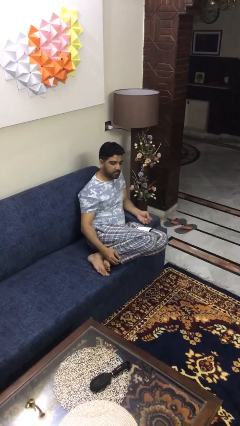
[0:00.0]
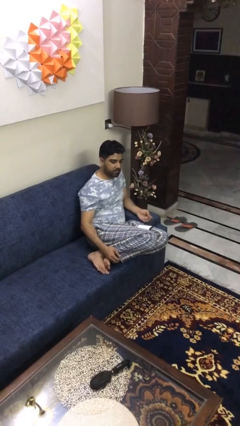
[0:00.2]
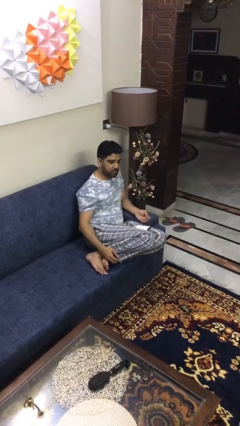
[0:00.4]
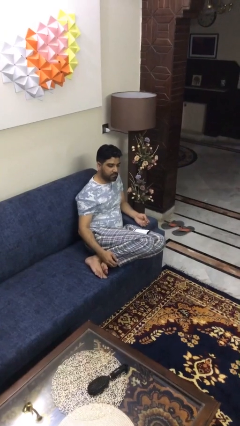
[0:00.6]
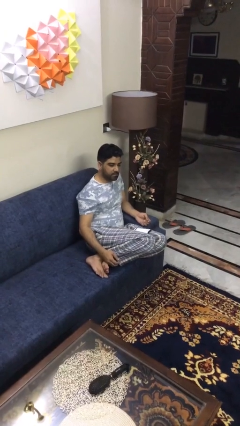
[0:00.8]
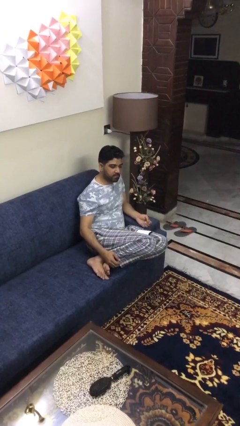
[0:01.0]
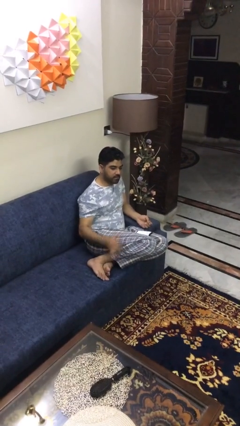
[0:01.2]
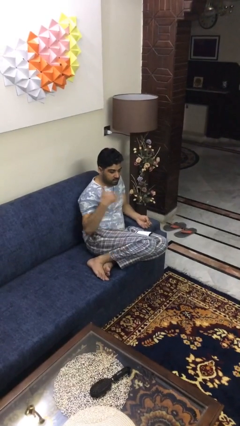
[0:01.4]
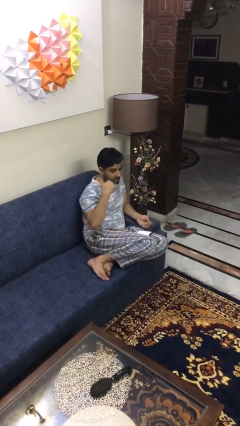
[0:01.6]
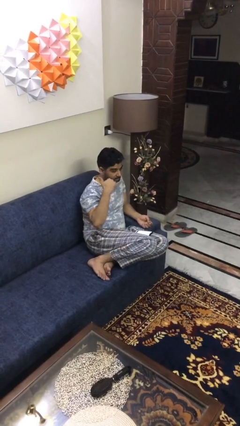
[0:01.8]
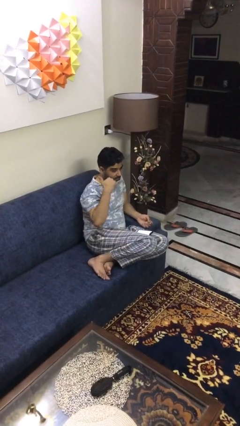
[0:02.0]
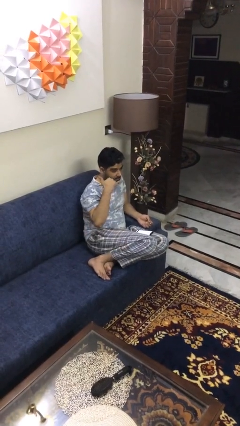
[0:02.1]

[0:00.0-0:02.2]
person gestures call me

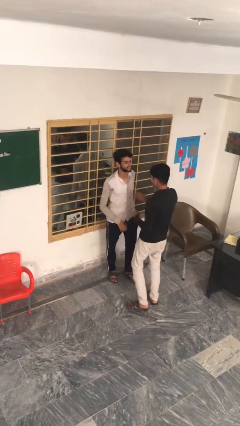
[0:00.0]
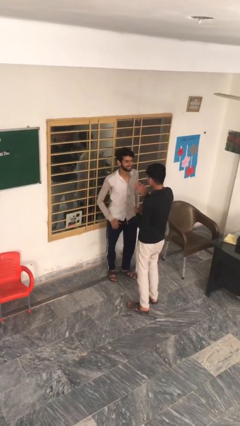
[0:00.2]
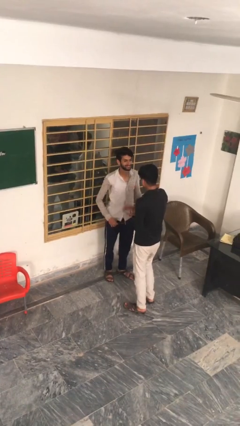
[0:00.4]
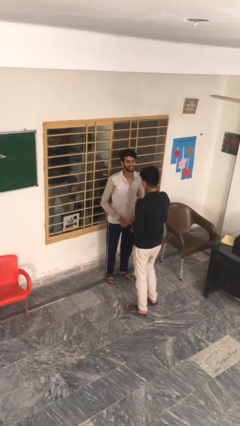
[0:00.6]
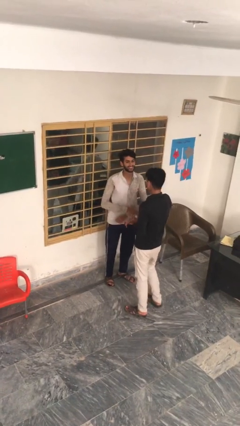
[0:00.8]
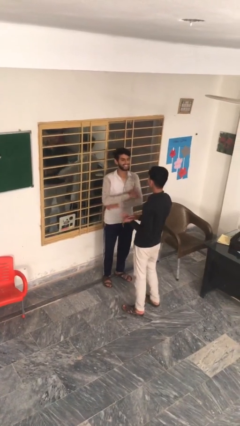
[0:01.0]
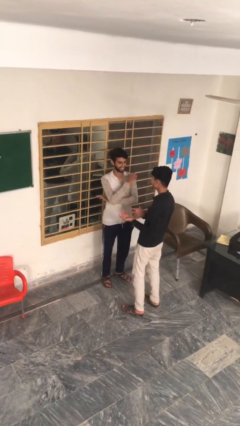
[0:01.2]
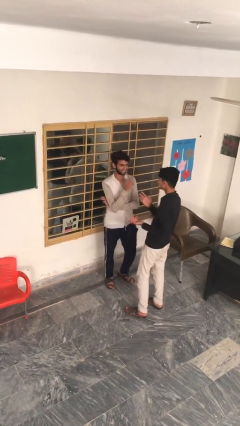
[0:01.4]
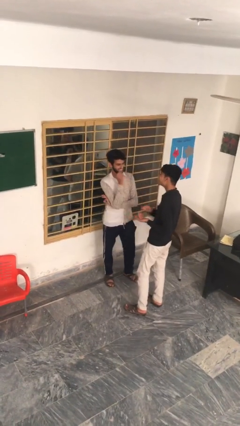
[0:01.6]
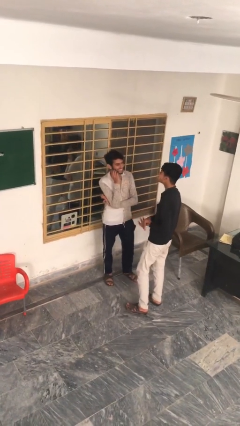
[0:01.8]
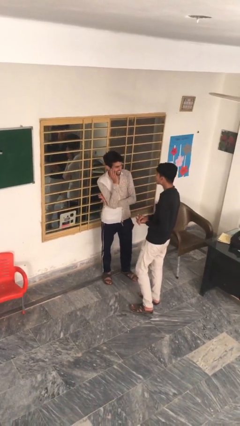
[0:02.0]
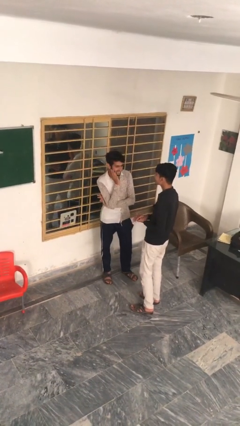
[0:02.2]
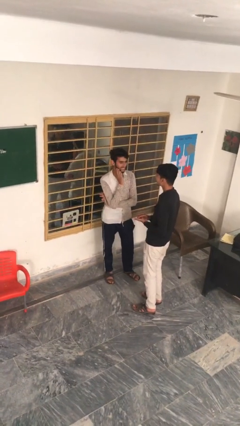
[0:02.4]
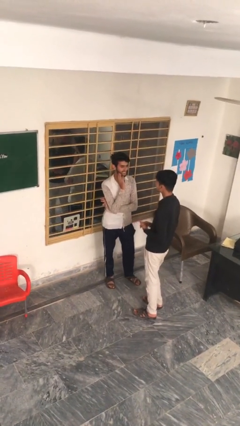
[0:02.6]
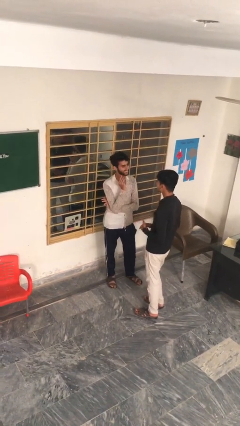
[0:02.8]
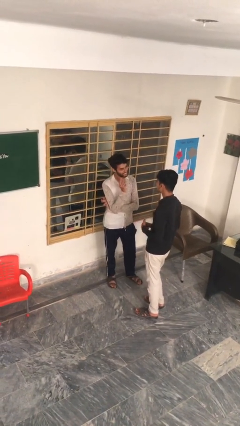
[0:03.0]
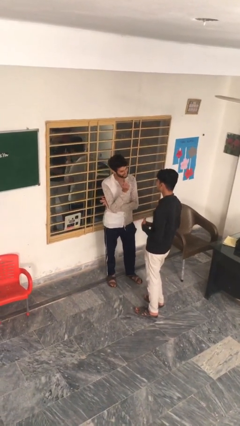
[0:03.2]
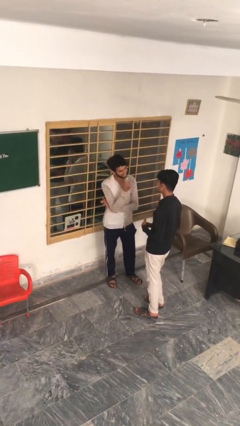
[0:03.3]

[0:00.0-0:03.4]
person talks to person

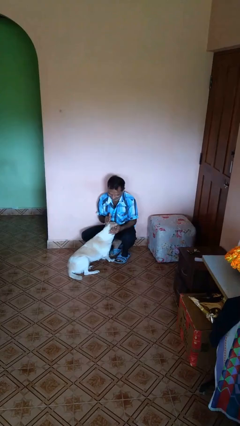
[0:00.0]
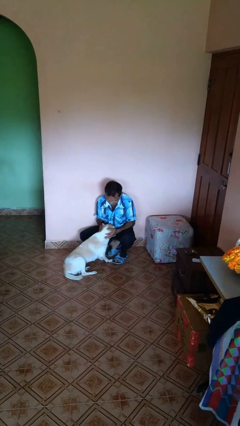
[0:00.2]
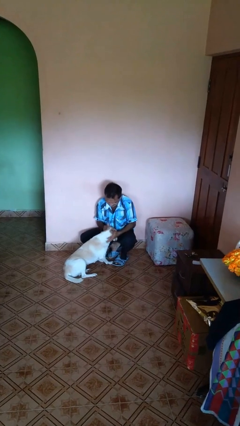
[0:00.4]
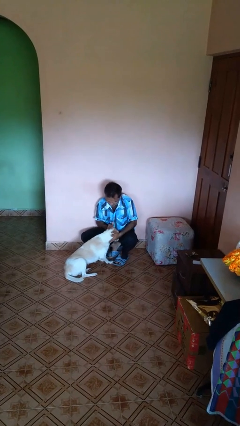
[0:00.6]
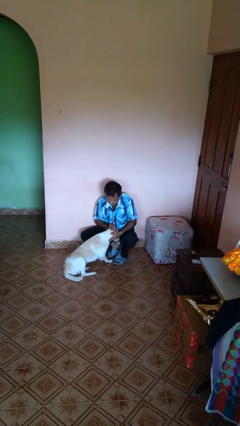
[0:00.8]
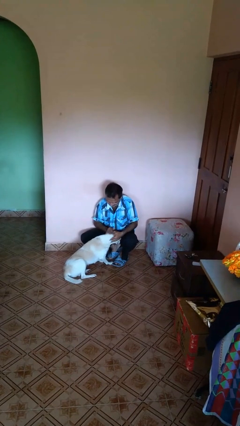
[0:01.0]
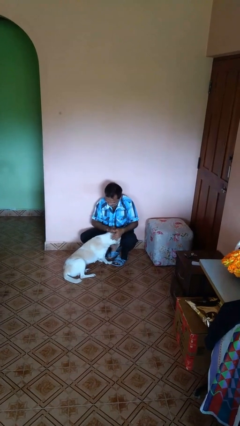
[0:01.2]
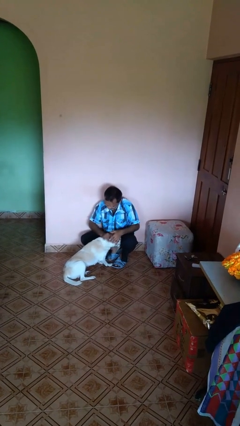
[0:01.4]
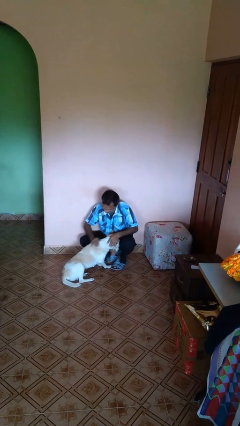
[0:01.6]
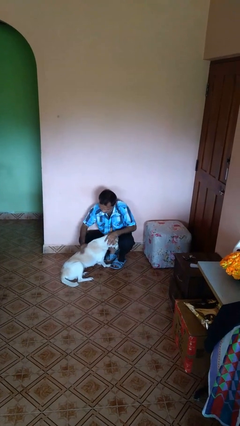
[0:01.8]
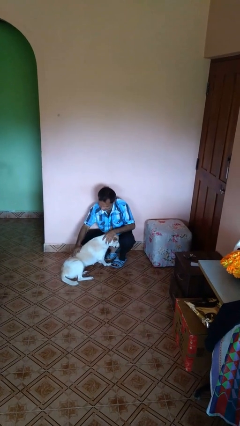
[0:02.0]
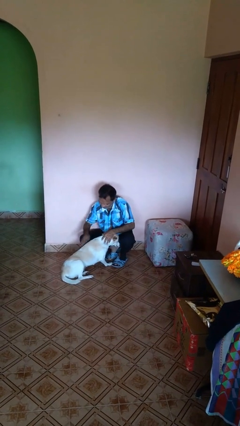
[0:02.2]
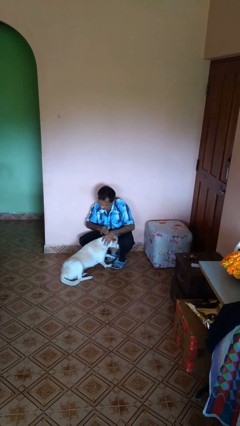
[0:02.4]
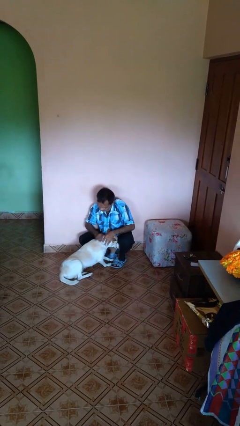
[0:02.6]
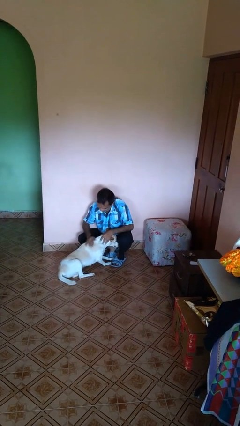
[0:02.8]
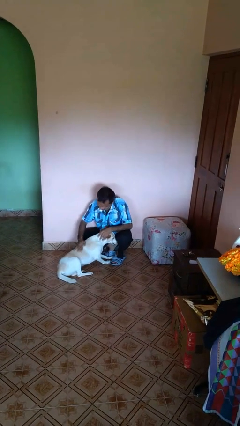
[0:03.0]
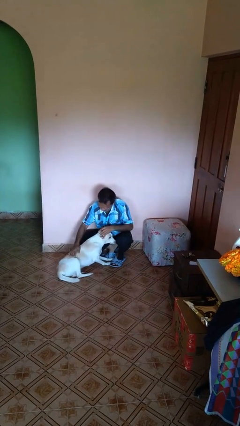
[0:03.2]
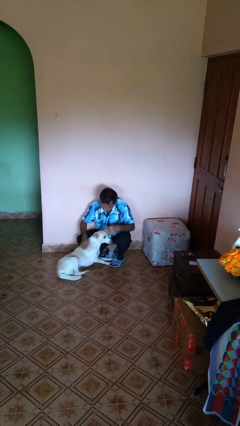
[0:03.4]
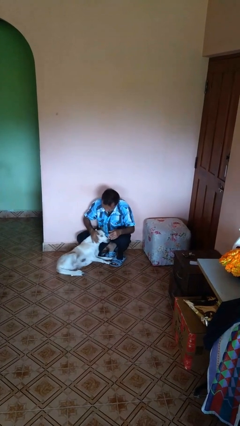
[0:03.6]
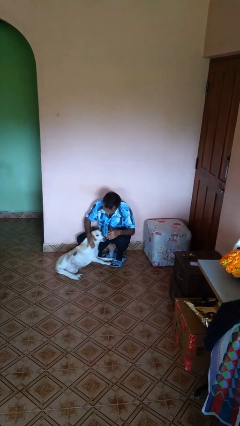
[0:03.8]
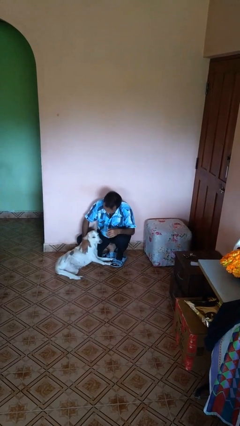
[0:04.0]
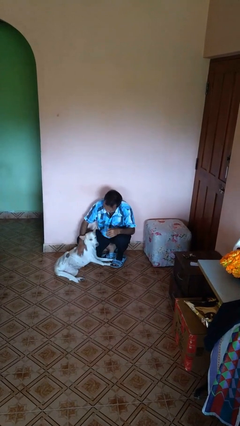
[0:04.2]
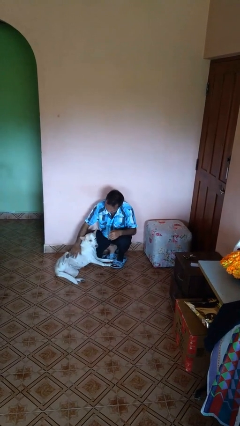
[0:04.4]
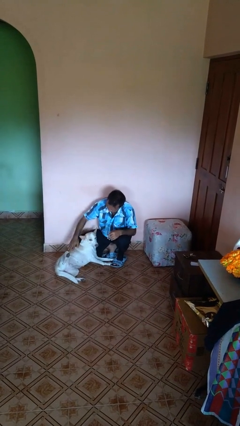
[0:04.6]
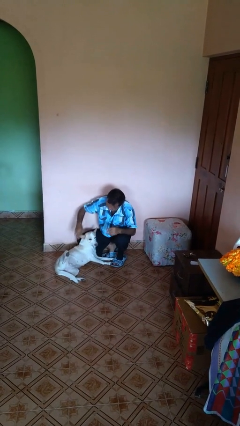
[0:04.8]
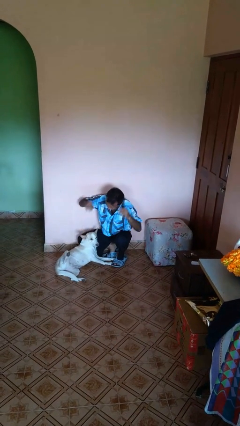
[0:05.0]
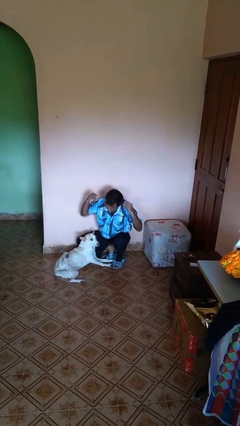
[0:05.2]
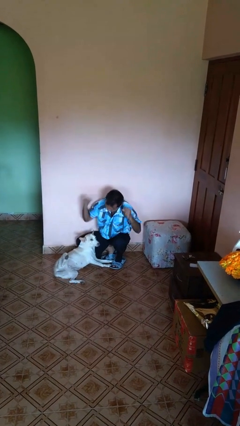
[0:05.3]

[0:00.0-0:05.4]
person pets dog

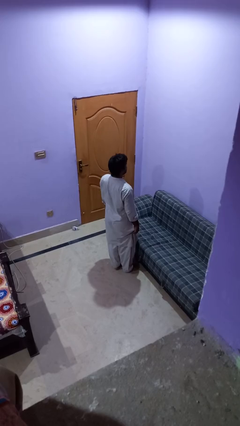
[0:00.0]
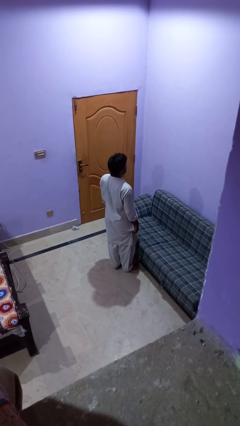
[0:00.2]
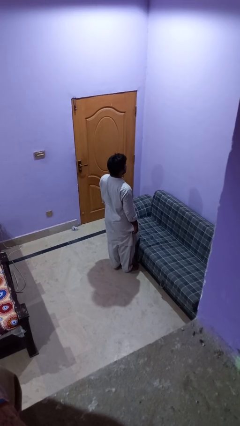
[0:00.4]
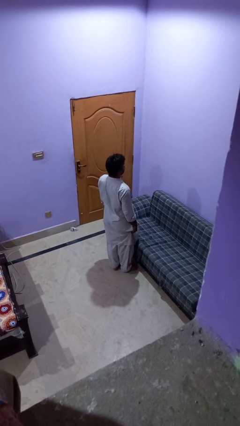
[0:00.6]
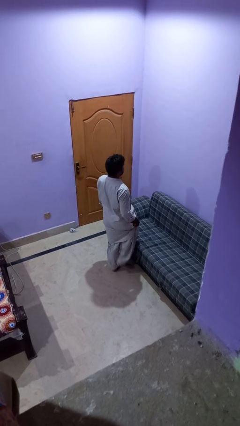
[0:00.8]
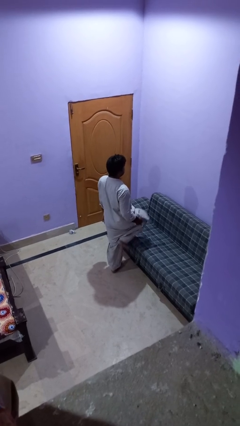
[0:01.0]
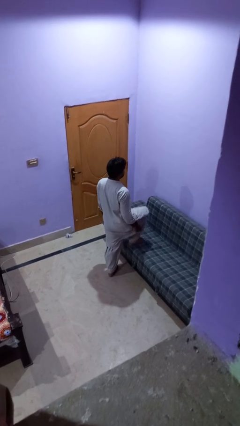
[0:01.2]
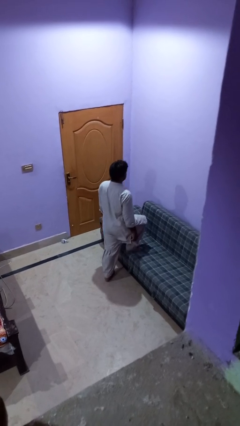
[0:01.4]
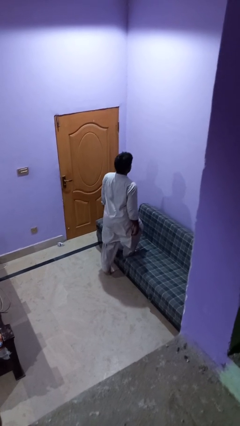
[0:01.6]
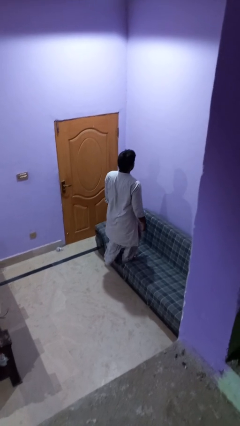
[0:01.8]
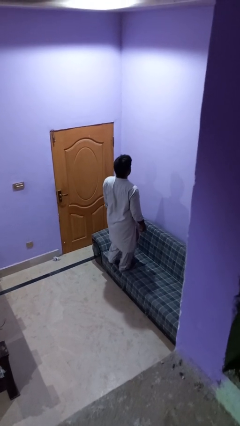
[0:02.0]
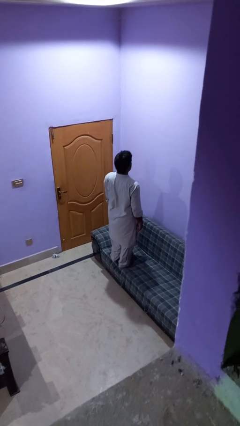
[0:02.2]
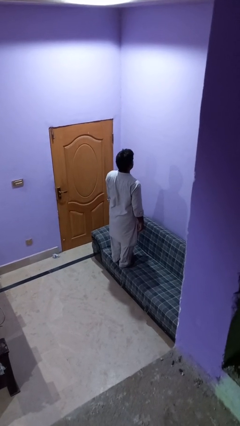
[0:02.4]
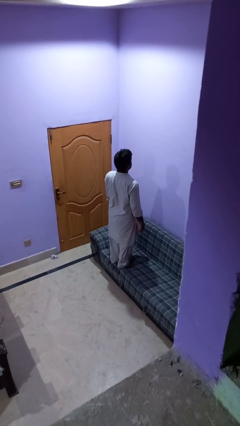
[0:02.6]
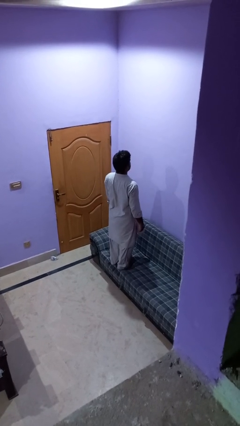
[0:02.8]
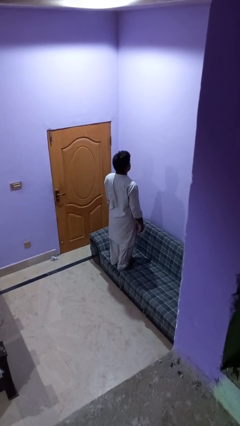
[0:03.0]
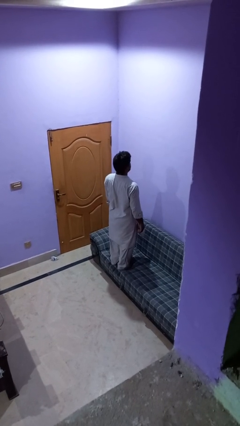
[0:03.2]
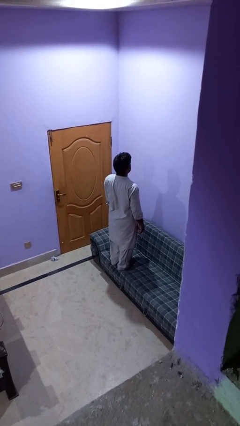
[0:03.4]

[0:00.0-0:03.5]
person climbs on couch

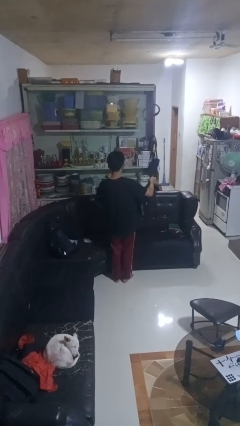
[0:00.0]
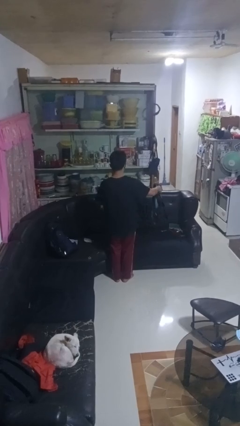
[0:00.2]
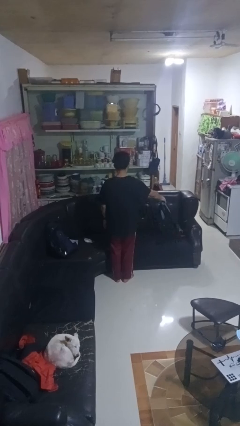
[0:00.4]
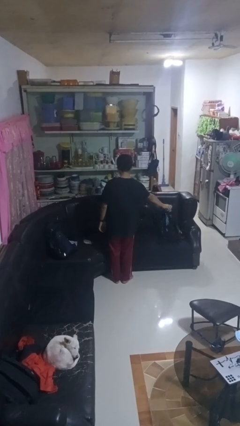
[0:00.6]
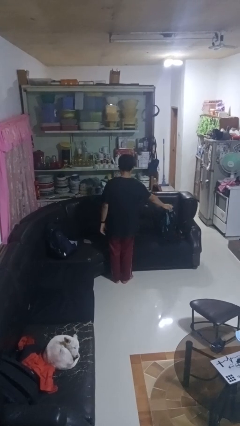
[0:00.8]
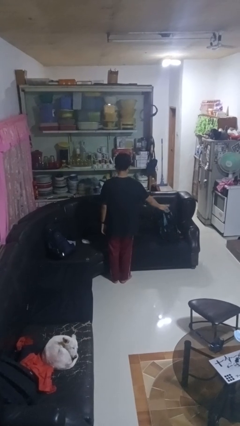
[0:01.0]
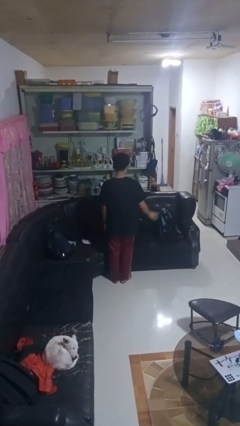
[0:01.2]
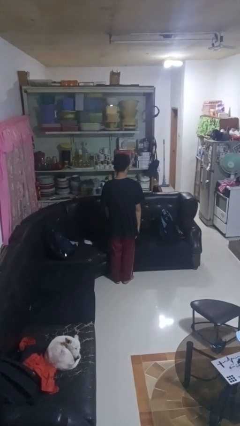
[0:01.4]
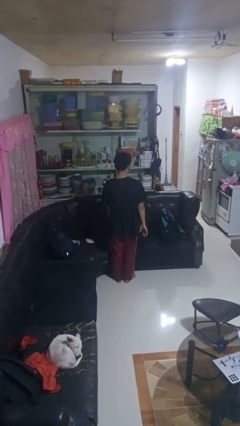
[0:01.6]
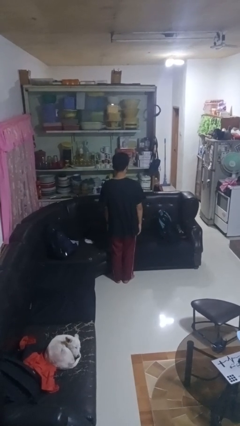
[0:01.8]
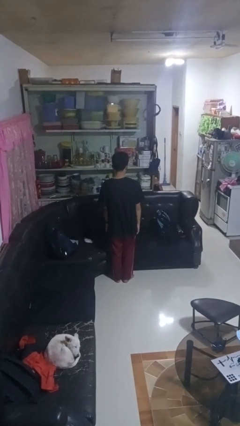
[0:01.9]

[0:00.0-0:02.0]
person puts down object on couch

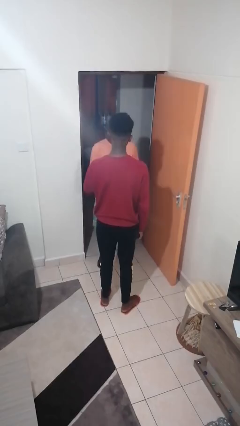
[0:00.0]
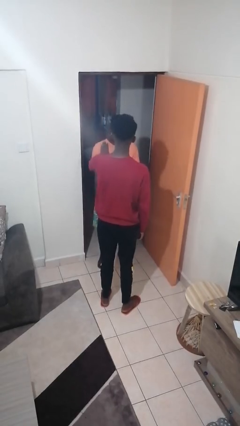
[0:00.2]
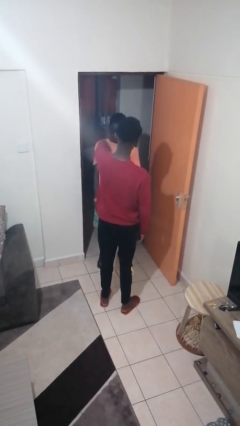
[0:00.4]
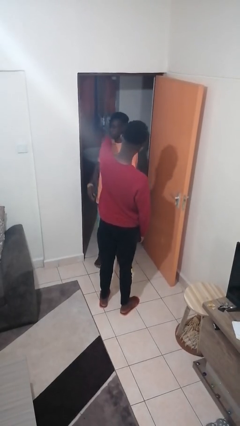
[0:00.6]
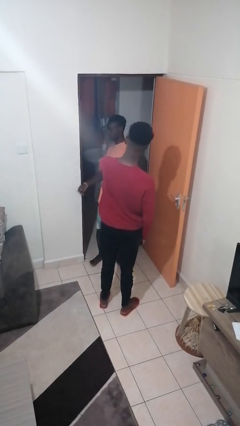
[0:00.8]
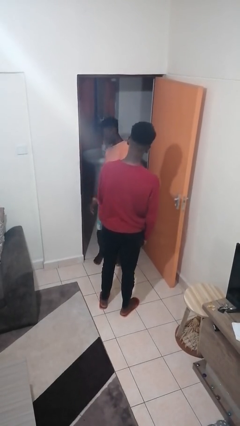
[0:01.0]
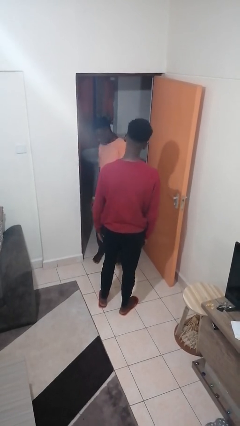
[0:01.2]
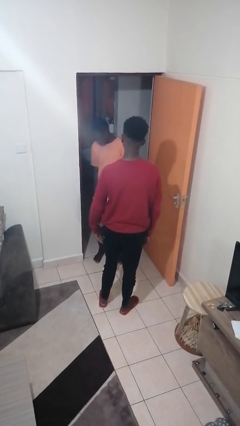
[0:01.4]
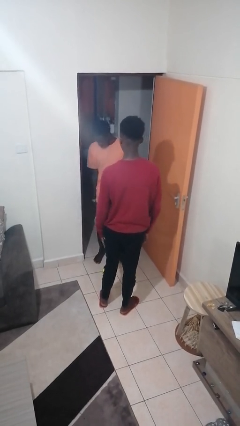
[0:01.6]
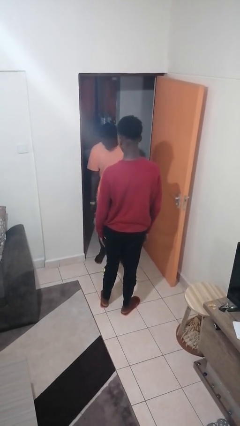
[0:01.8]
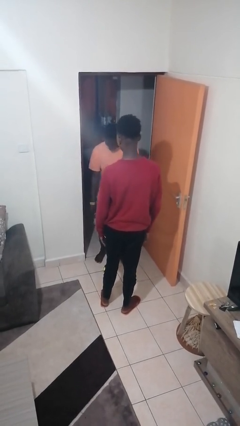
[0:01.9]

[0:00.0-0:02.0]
person shoves person
